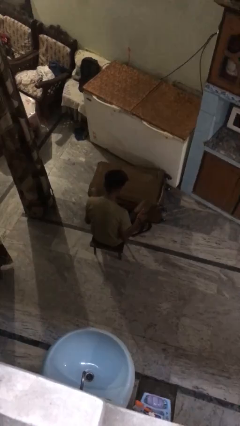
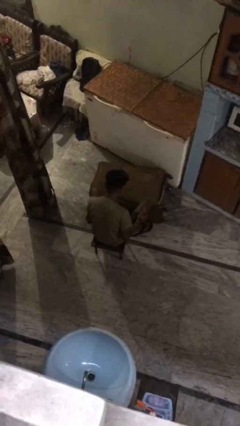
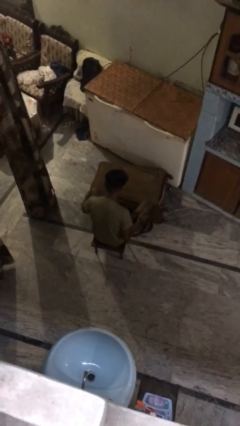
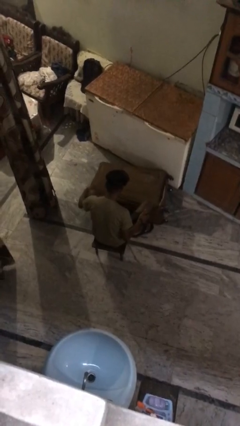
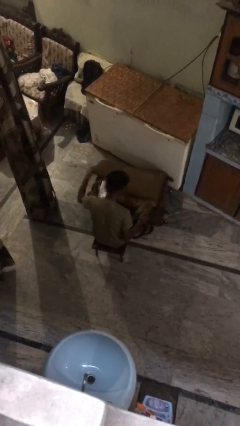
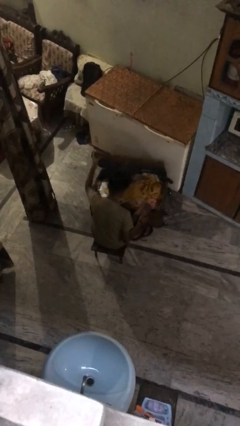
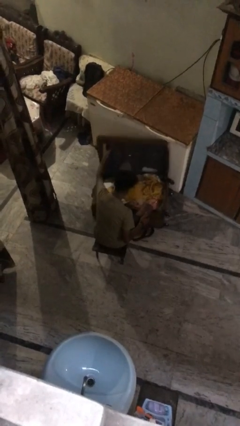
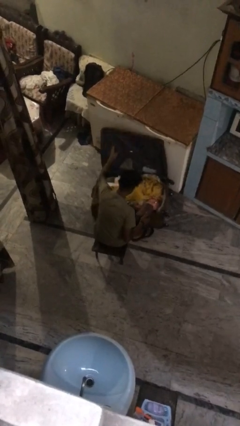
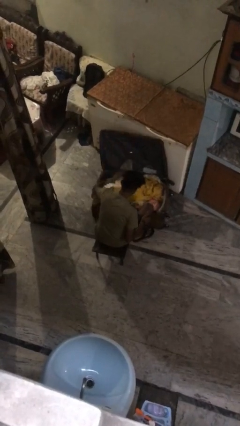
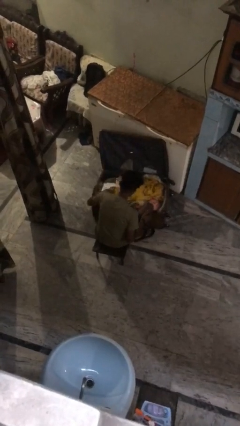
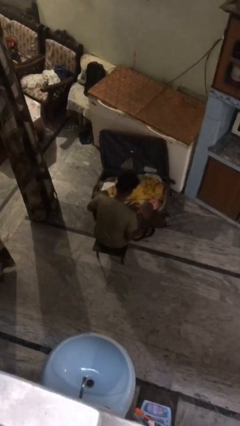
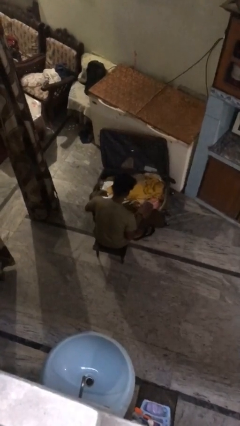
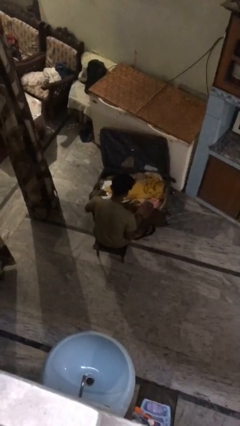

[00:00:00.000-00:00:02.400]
person opens suitcase

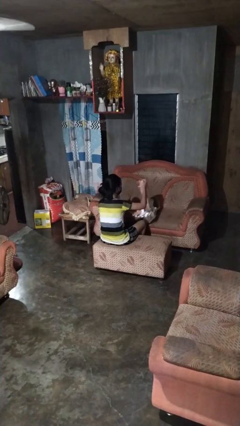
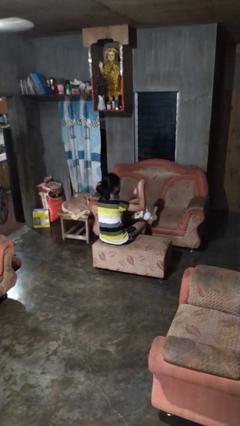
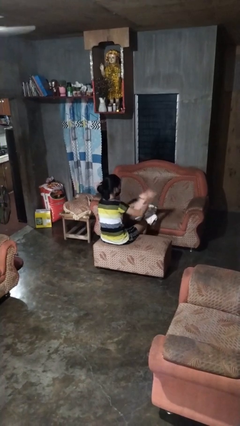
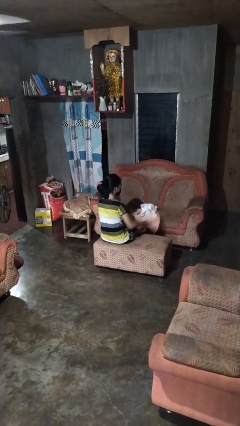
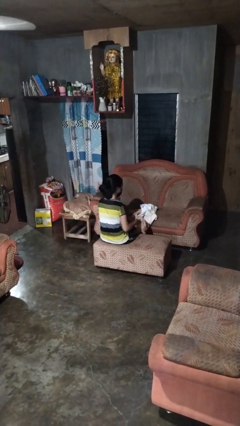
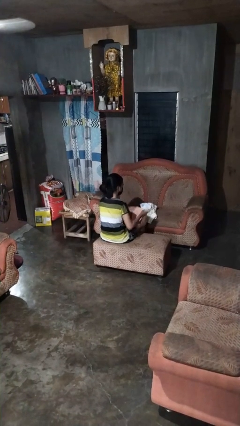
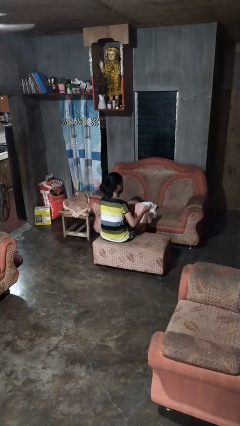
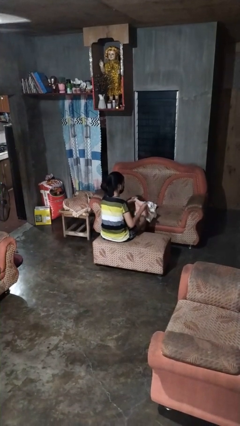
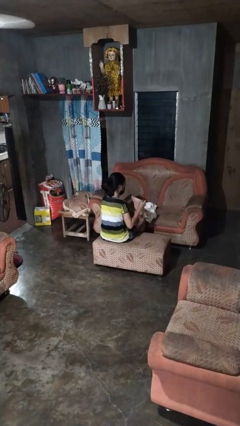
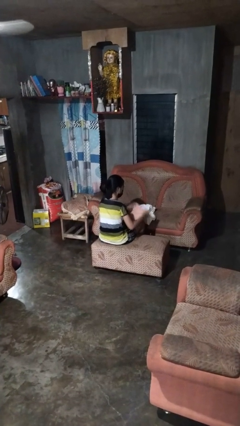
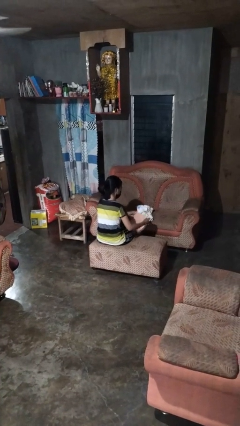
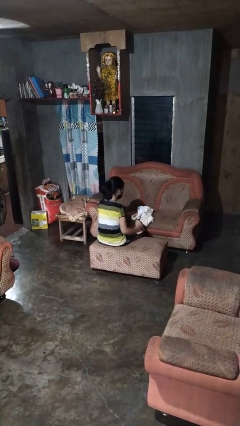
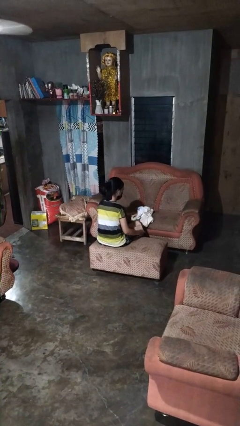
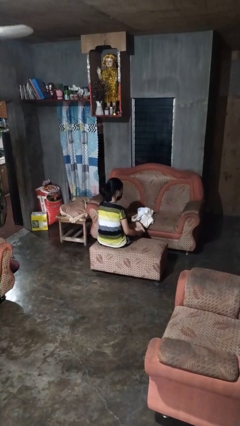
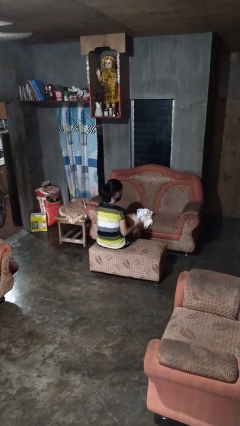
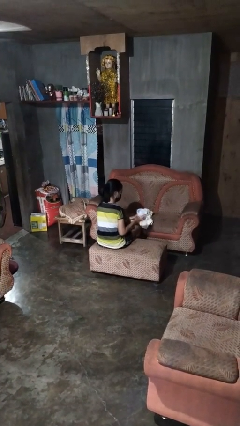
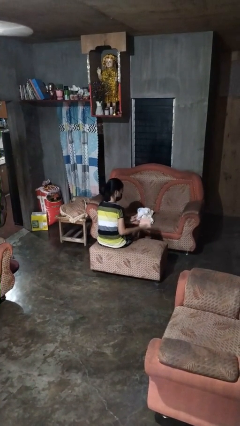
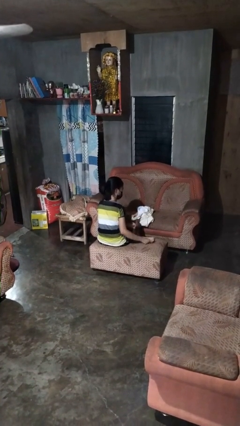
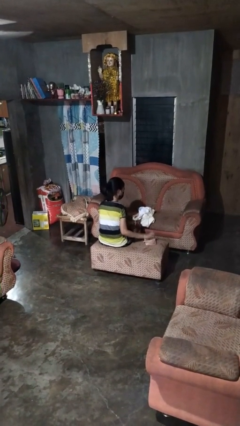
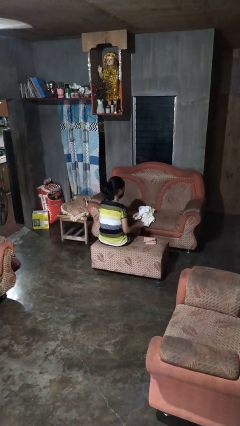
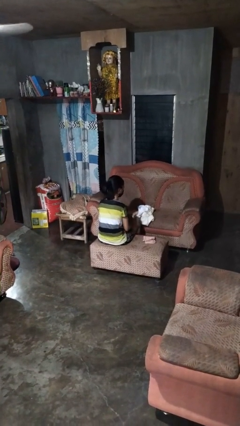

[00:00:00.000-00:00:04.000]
person folds towel

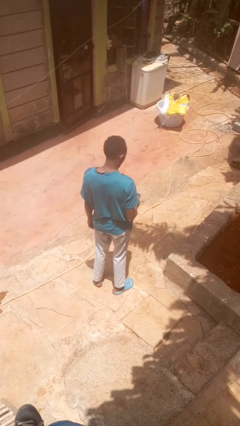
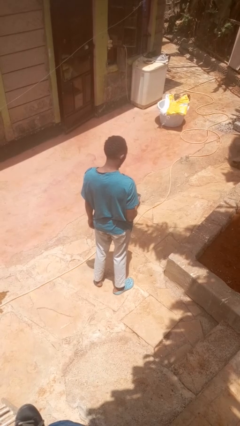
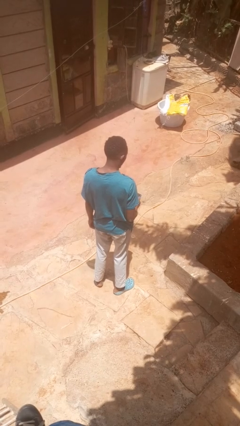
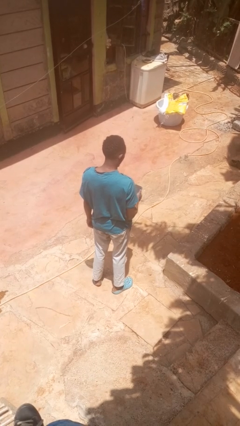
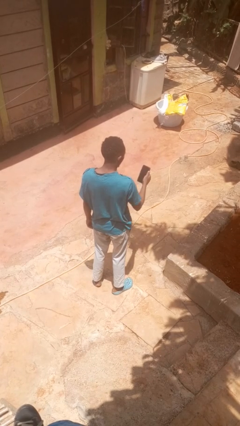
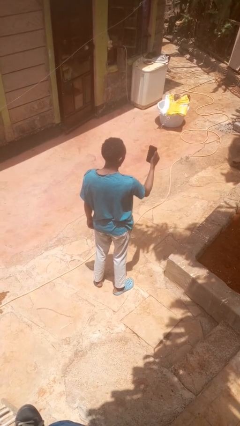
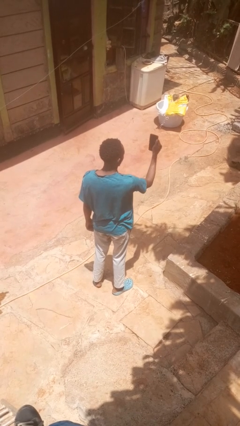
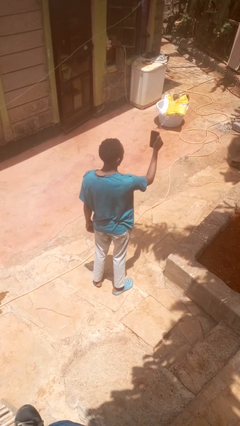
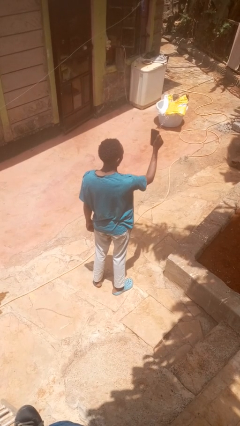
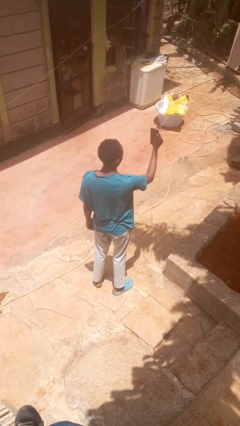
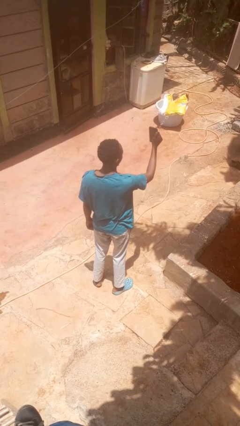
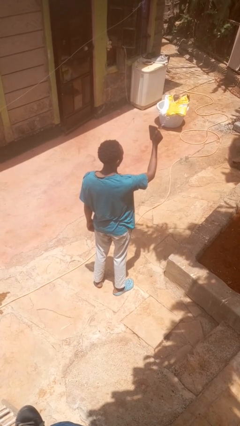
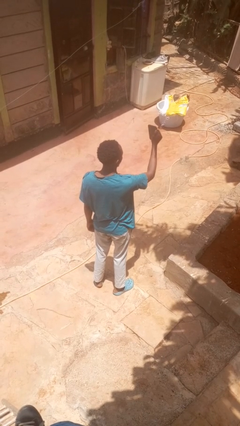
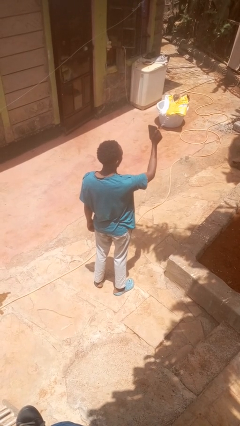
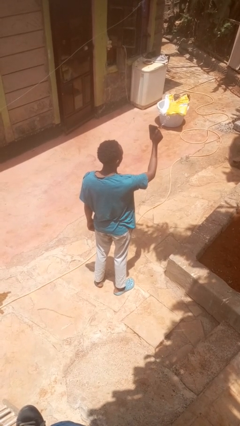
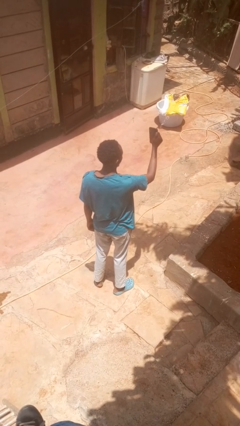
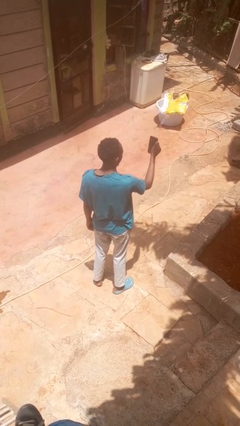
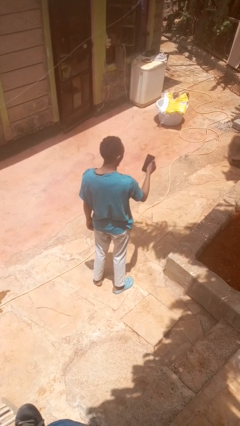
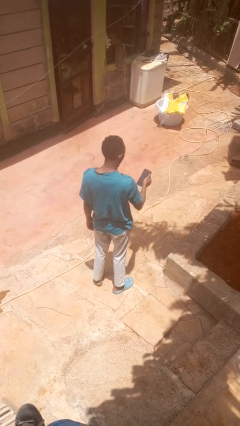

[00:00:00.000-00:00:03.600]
person takes selfie

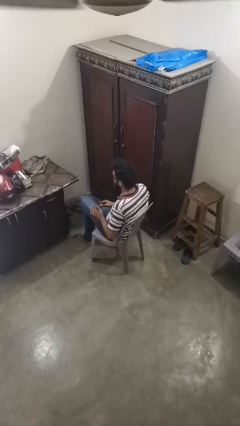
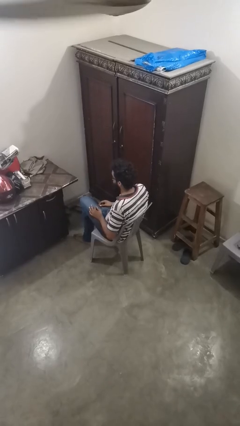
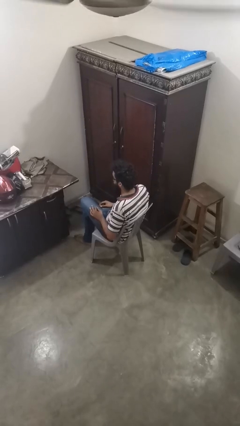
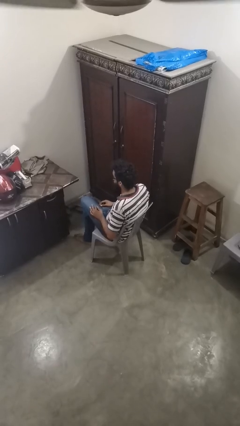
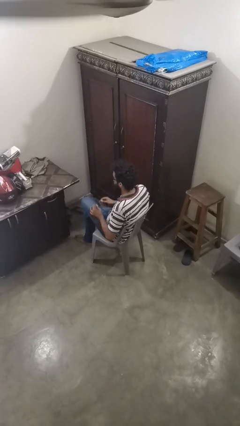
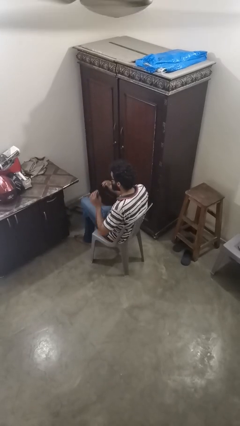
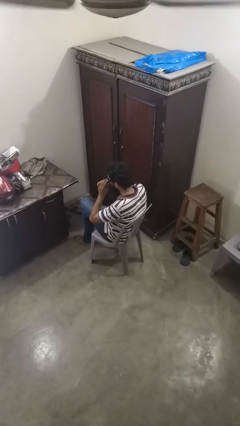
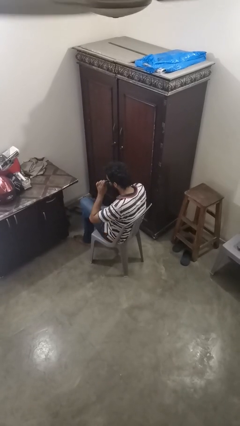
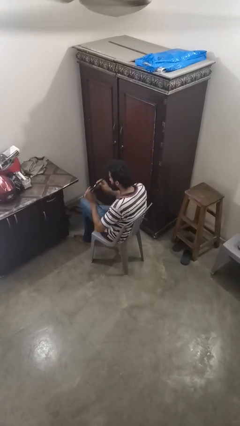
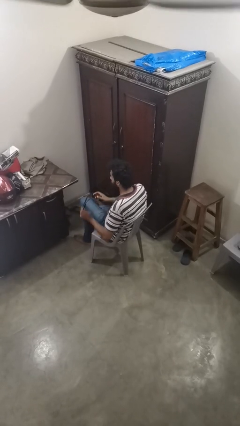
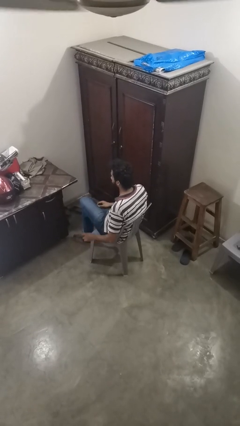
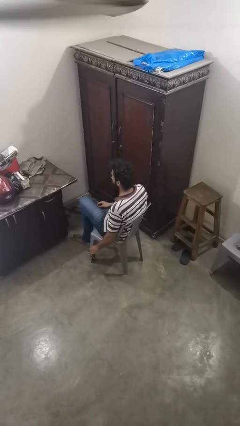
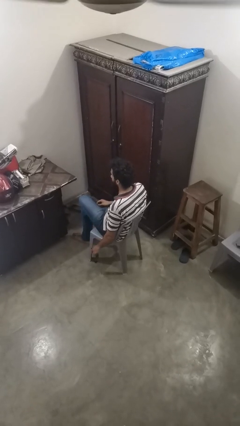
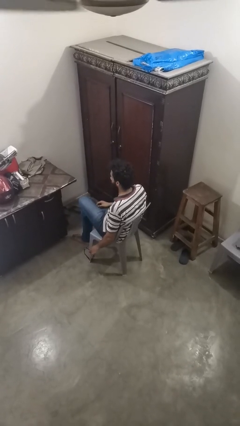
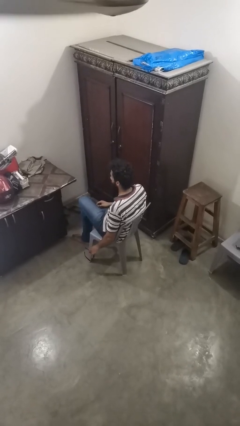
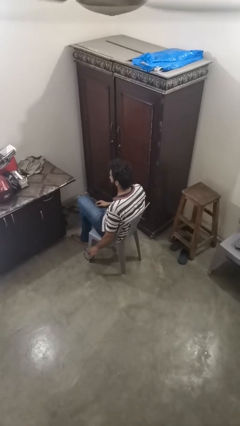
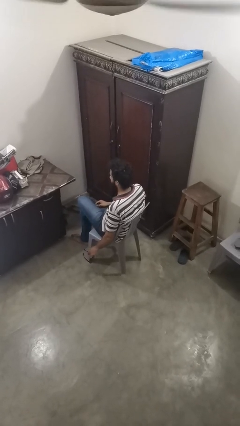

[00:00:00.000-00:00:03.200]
person takes off sunglasses

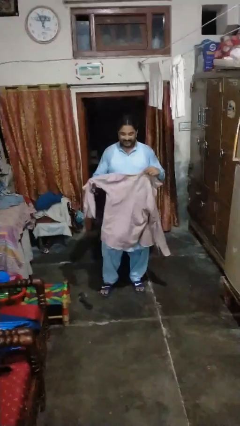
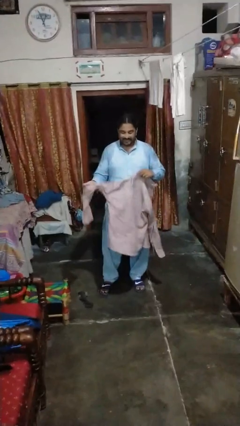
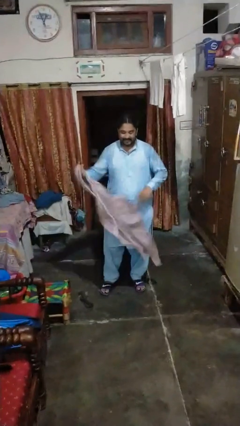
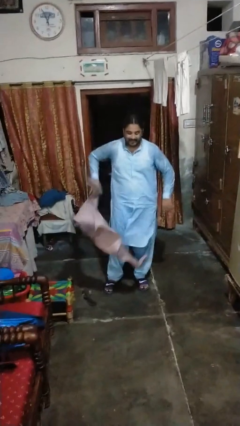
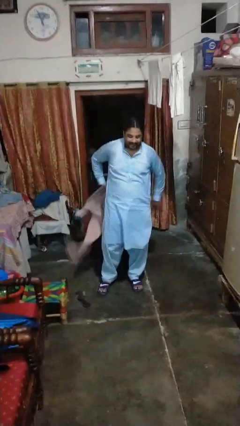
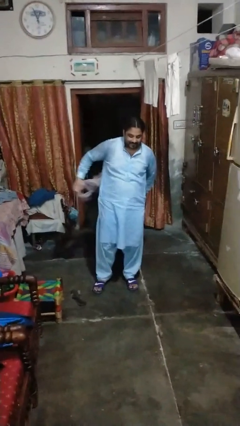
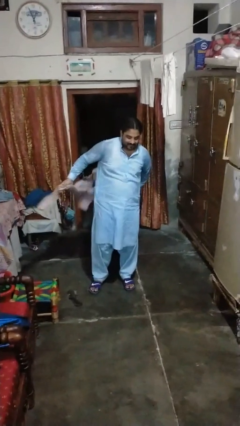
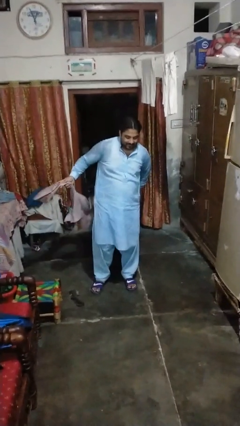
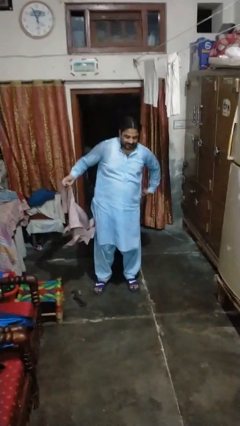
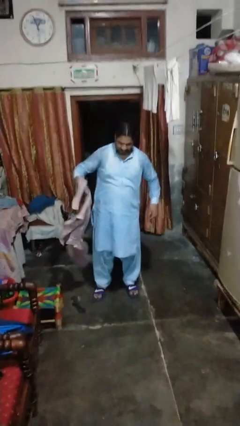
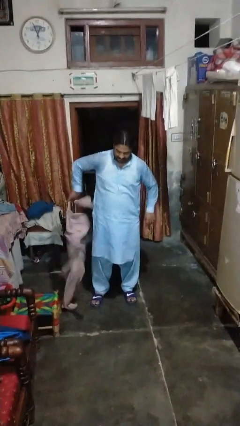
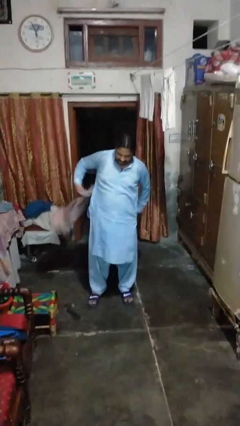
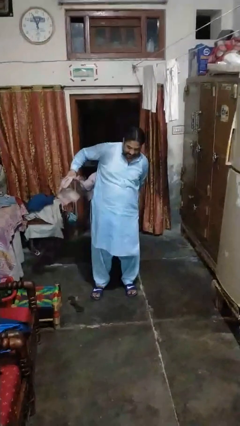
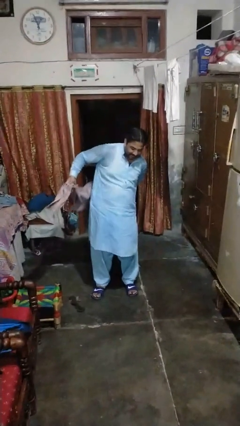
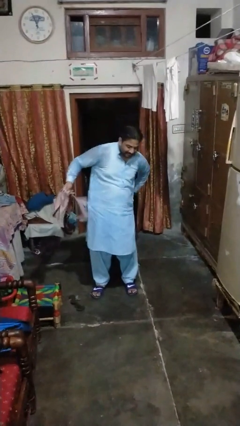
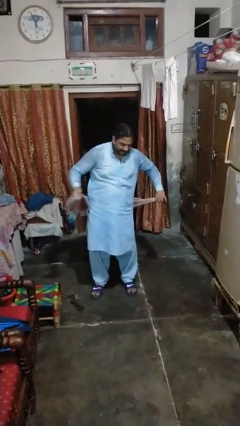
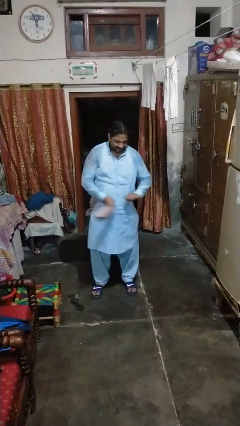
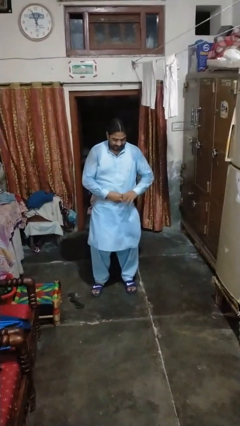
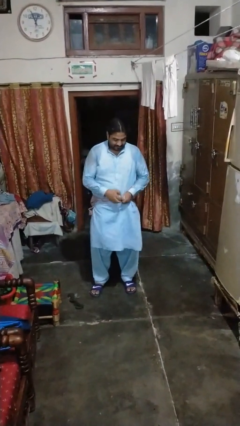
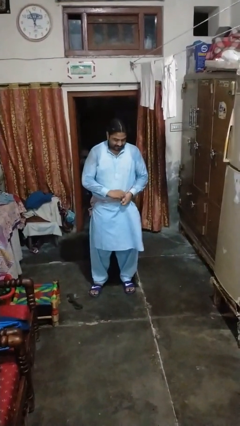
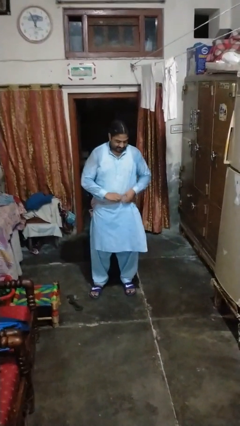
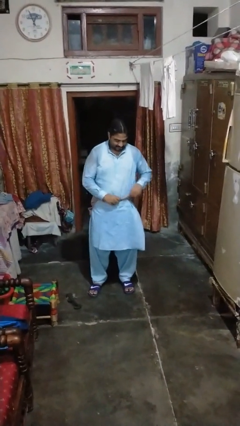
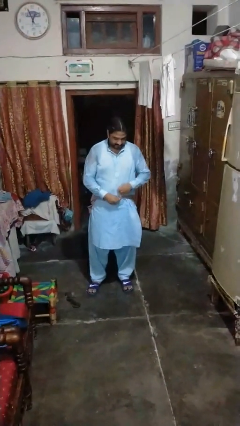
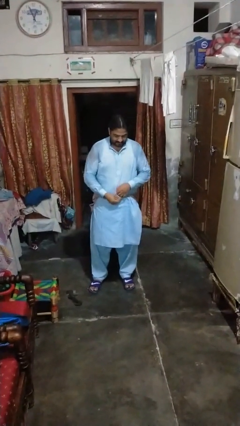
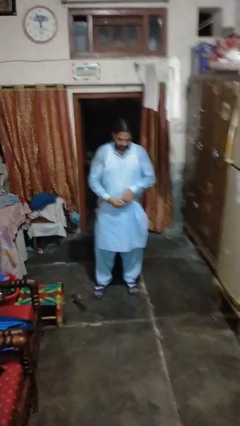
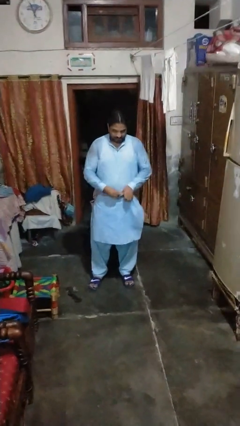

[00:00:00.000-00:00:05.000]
person ties jacket around waist
